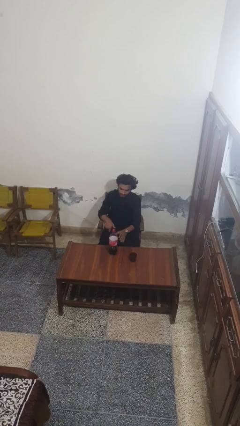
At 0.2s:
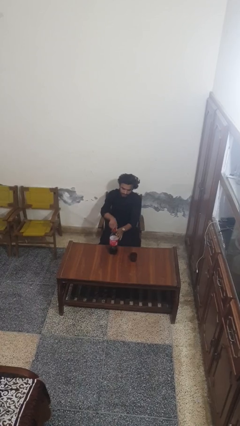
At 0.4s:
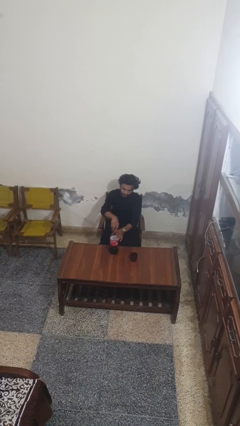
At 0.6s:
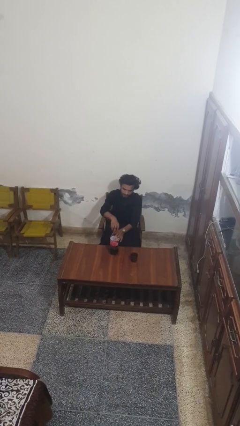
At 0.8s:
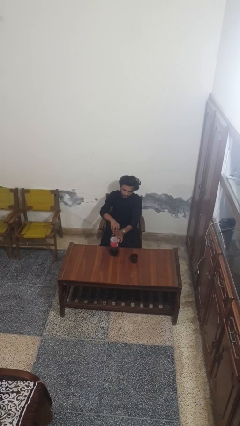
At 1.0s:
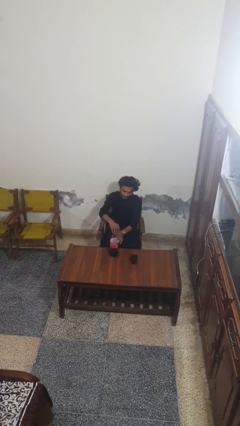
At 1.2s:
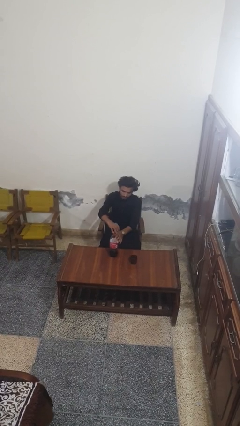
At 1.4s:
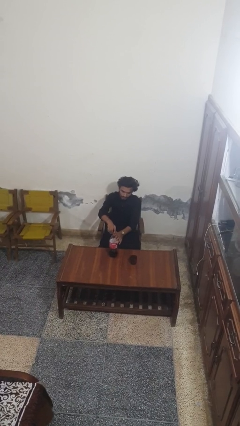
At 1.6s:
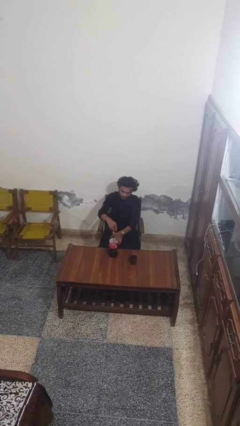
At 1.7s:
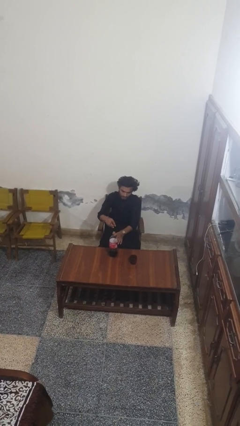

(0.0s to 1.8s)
person unscrews lid from bottle

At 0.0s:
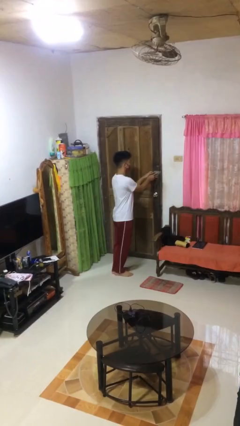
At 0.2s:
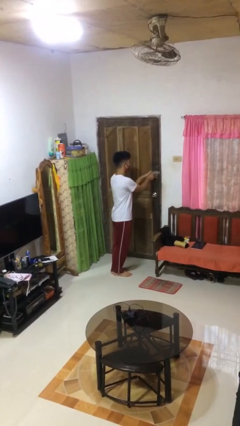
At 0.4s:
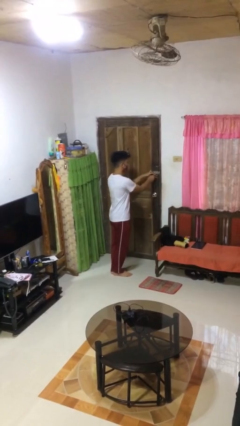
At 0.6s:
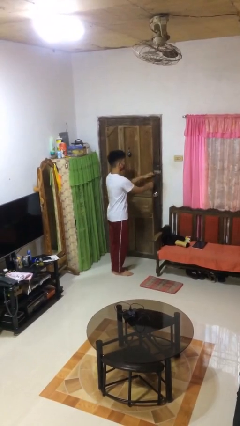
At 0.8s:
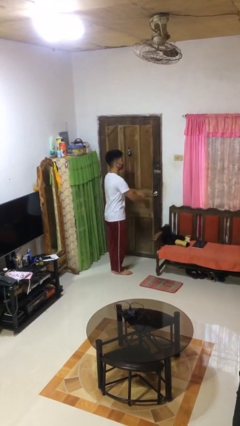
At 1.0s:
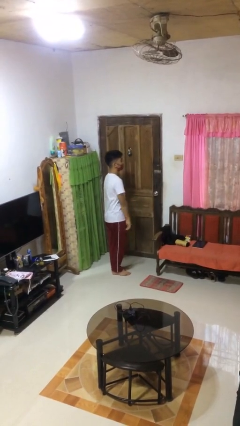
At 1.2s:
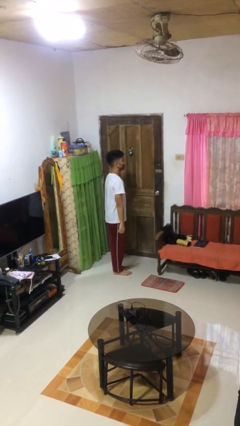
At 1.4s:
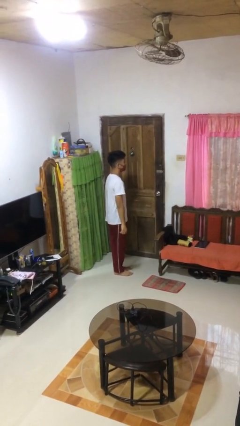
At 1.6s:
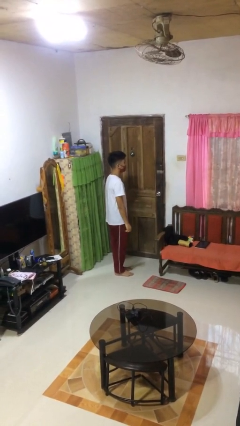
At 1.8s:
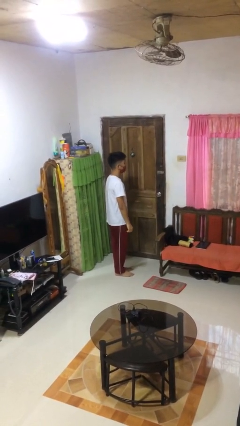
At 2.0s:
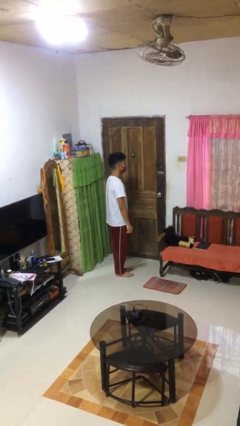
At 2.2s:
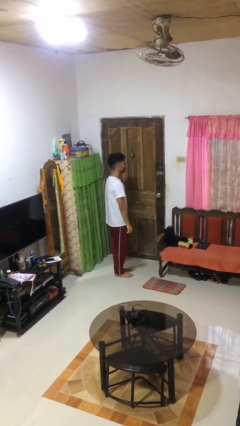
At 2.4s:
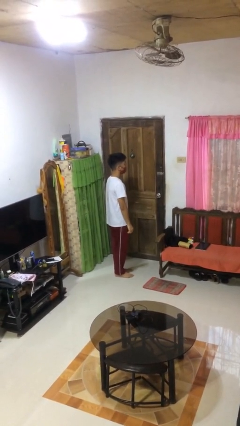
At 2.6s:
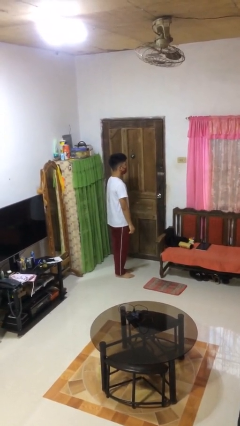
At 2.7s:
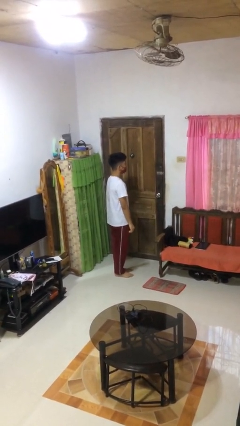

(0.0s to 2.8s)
person locks door with keys

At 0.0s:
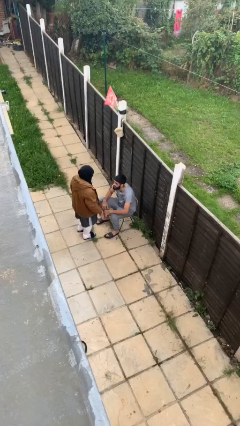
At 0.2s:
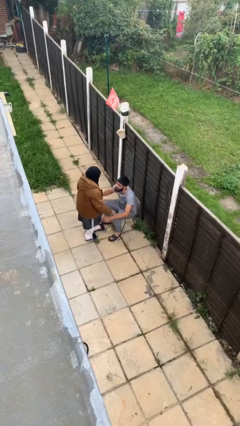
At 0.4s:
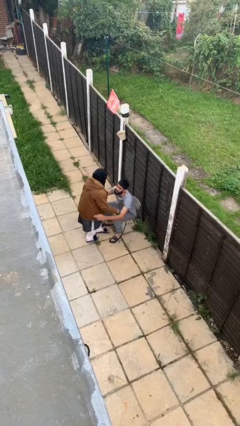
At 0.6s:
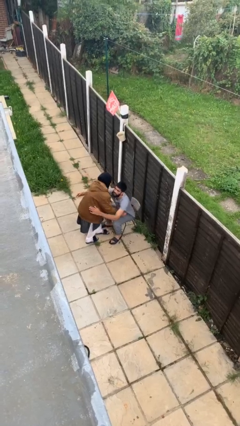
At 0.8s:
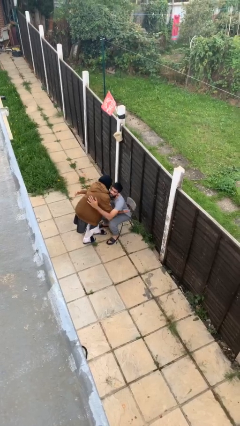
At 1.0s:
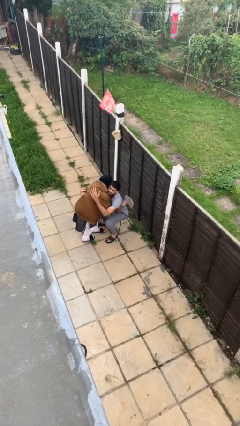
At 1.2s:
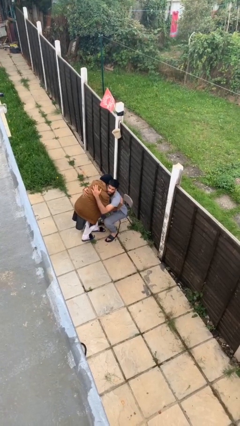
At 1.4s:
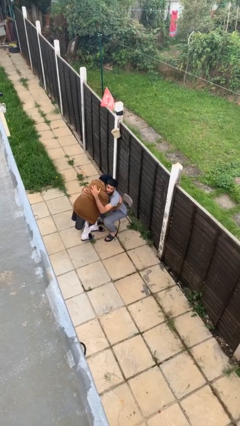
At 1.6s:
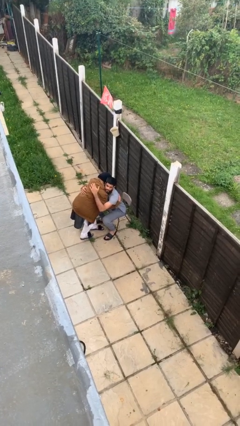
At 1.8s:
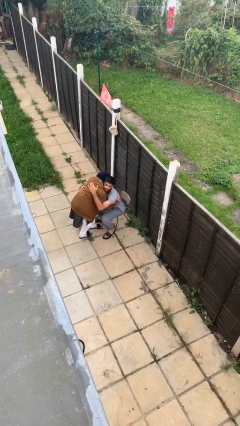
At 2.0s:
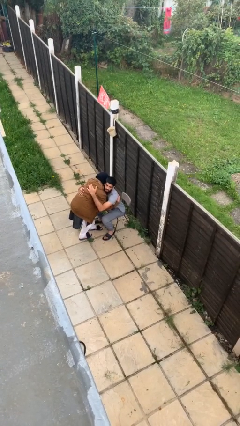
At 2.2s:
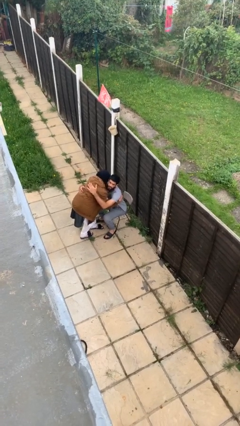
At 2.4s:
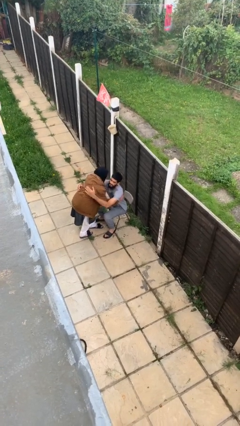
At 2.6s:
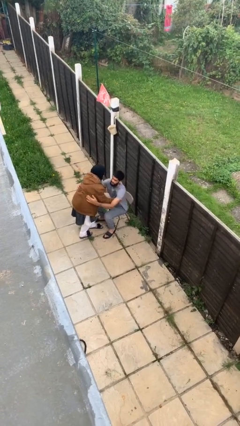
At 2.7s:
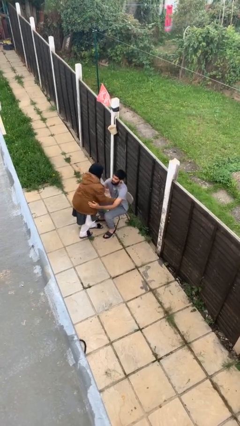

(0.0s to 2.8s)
person embraces person

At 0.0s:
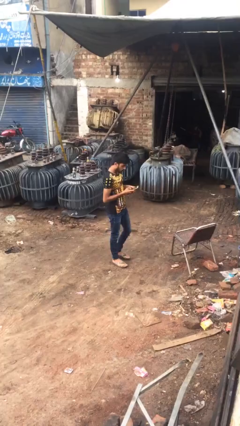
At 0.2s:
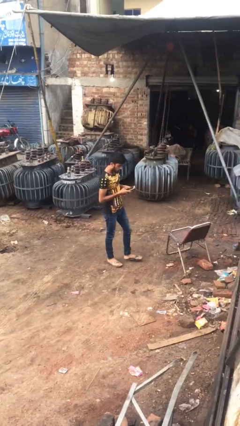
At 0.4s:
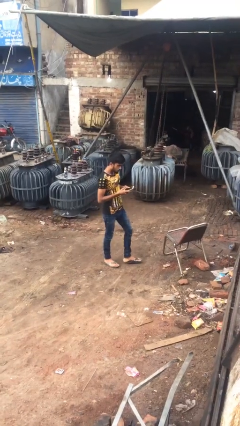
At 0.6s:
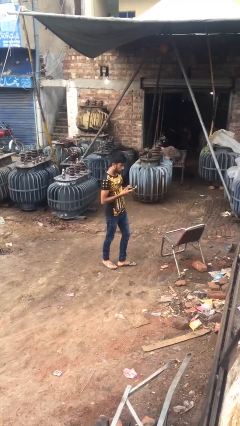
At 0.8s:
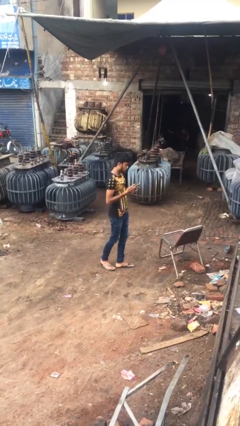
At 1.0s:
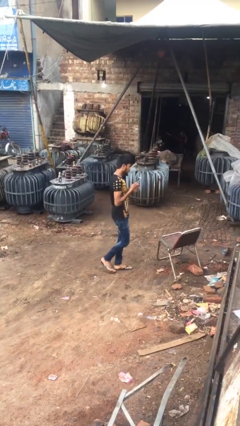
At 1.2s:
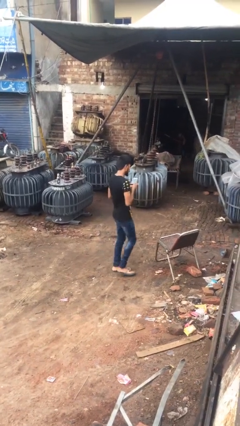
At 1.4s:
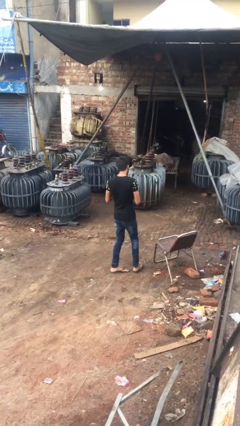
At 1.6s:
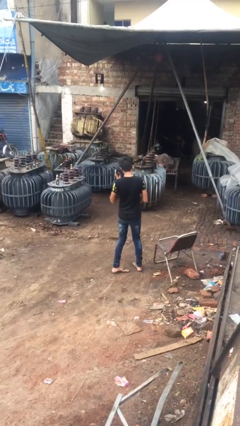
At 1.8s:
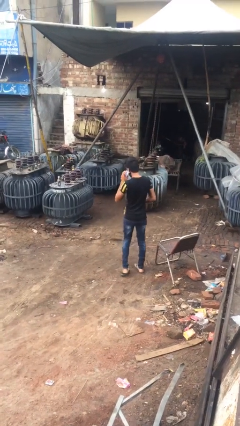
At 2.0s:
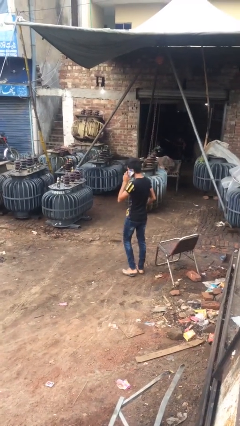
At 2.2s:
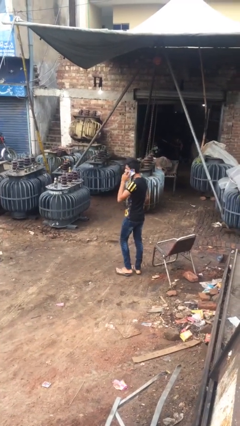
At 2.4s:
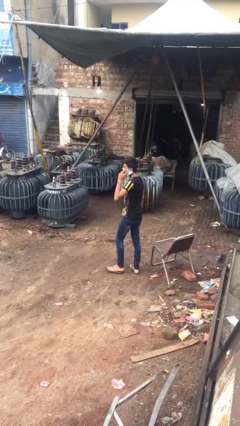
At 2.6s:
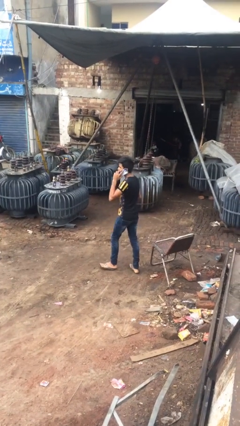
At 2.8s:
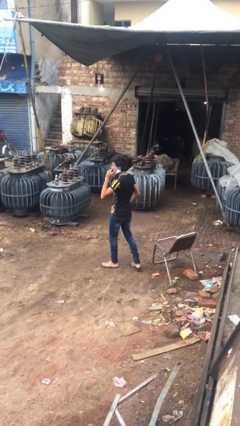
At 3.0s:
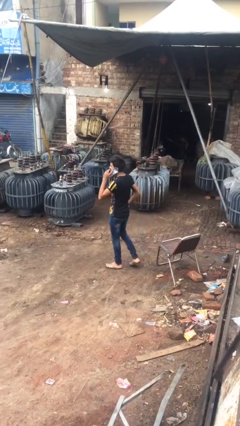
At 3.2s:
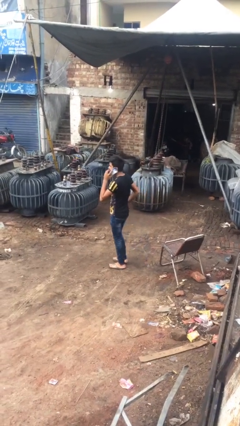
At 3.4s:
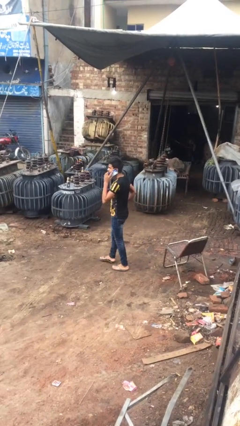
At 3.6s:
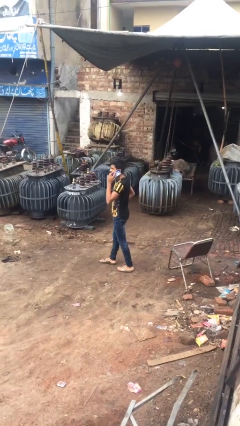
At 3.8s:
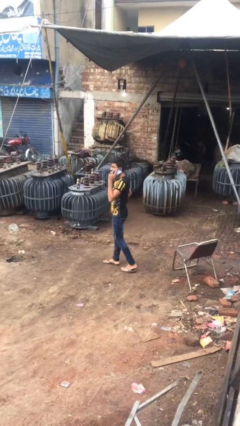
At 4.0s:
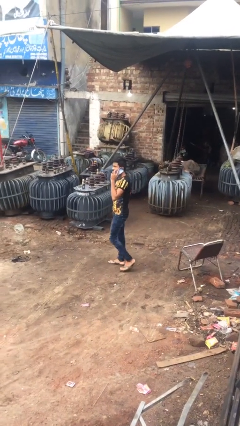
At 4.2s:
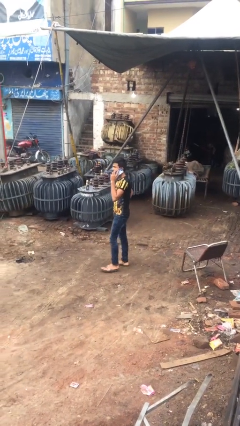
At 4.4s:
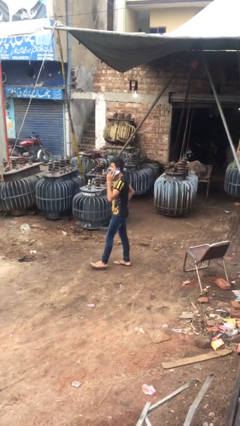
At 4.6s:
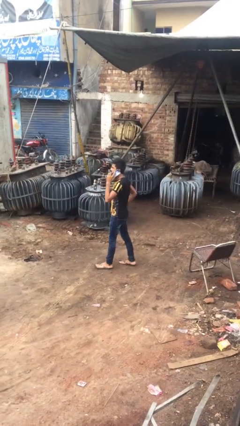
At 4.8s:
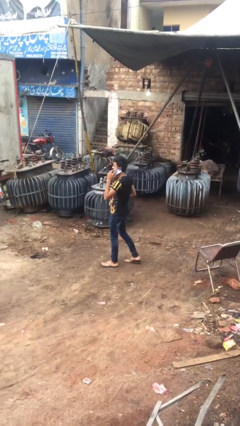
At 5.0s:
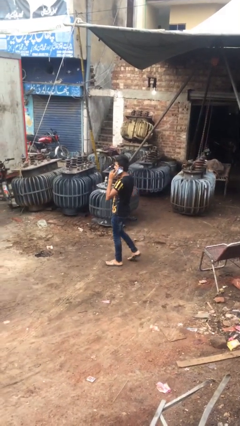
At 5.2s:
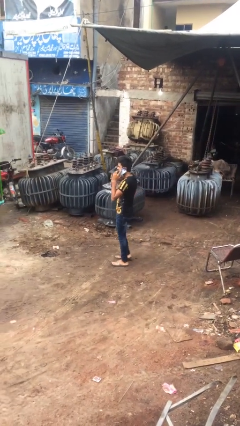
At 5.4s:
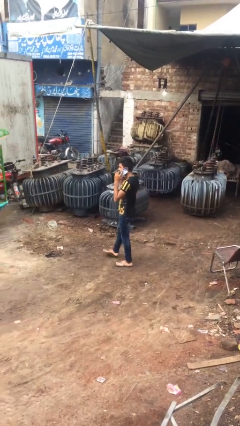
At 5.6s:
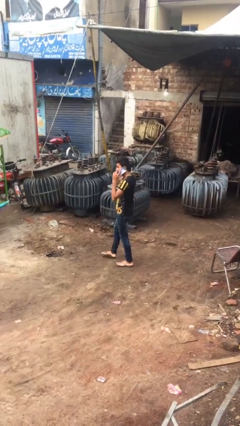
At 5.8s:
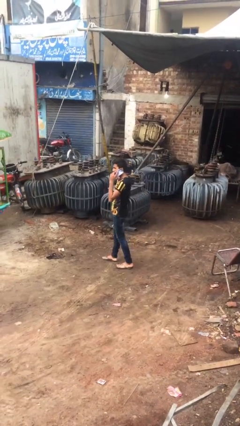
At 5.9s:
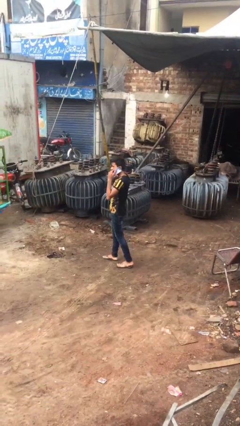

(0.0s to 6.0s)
person talks on phone

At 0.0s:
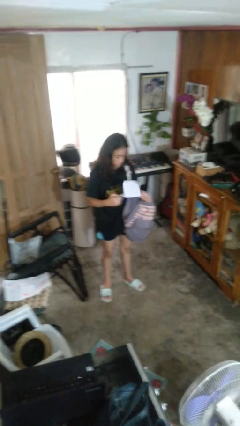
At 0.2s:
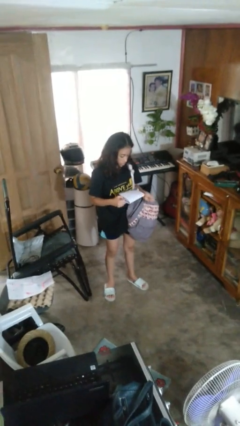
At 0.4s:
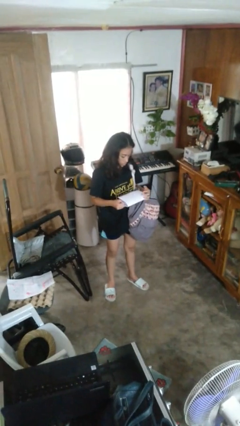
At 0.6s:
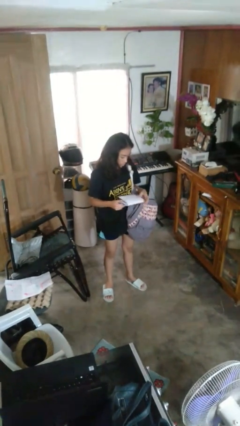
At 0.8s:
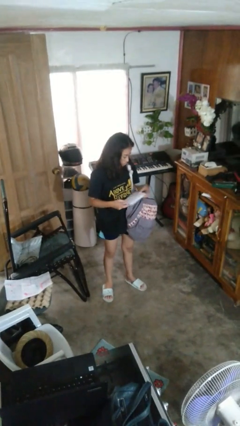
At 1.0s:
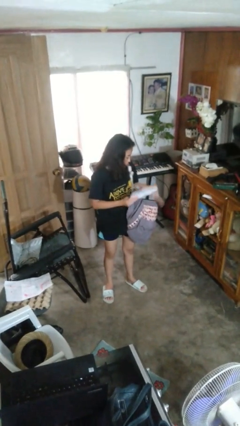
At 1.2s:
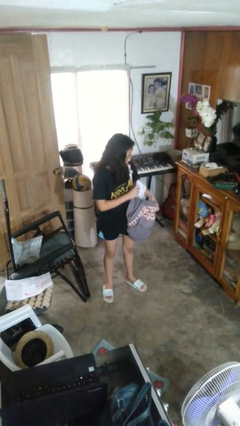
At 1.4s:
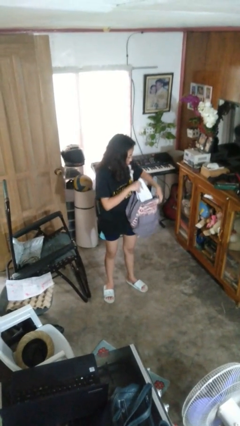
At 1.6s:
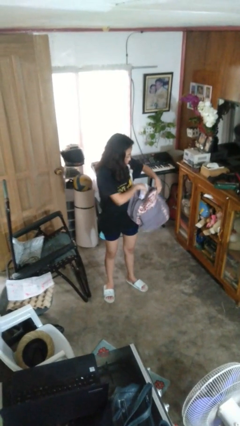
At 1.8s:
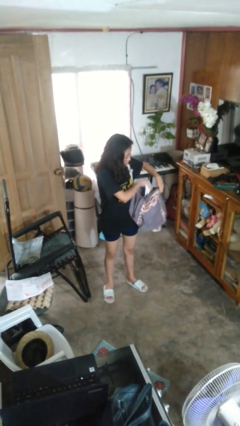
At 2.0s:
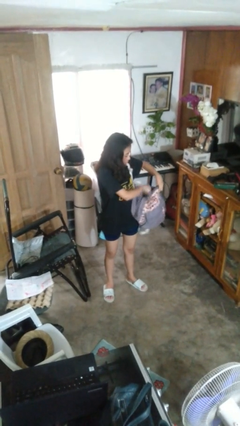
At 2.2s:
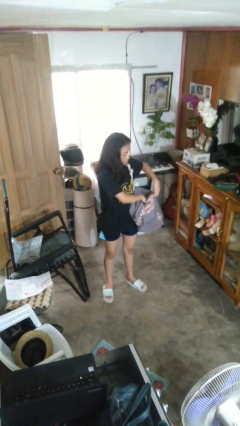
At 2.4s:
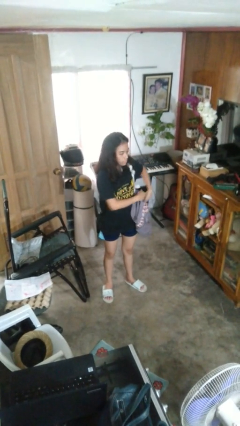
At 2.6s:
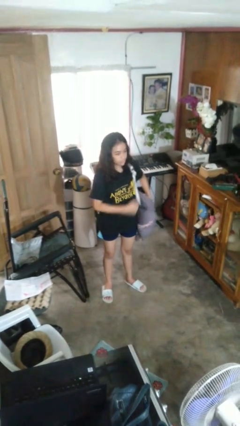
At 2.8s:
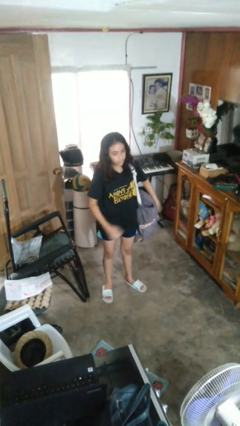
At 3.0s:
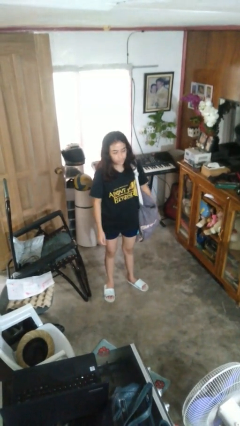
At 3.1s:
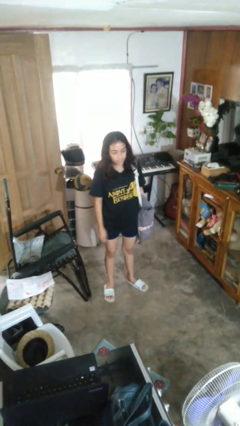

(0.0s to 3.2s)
person puts object into backpack

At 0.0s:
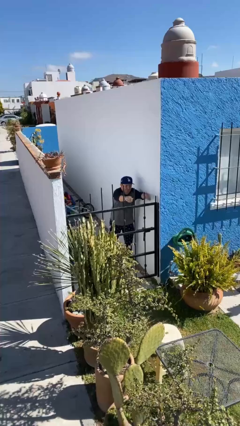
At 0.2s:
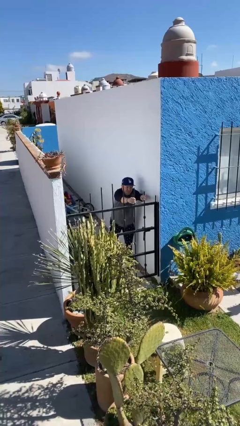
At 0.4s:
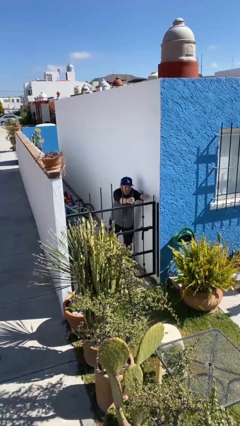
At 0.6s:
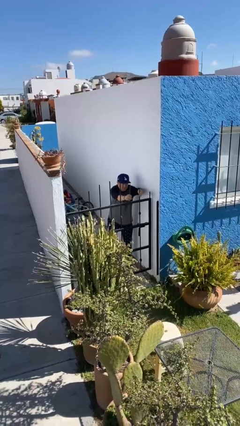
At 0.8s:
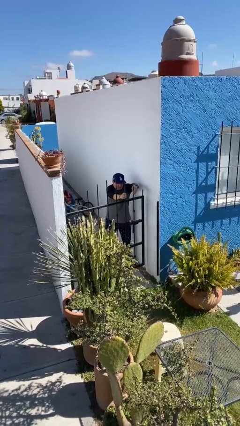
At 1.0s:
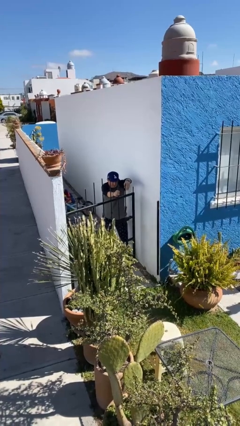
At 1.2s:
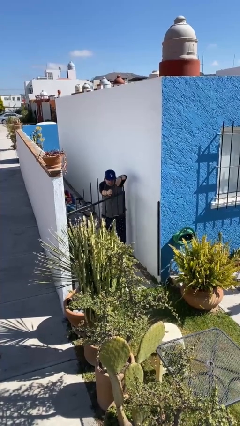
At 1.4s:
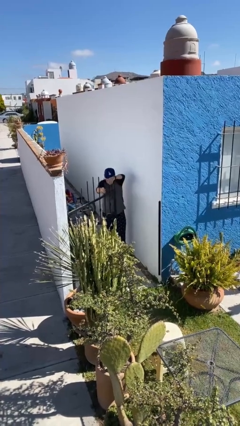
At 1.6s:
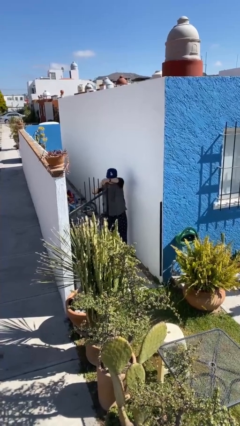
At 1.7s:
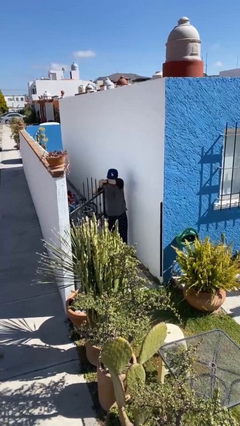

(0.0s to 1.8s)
person opens facility door
